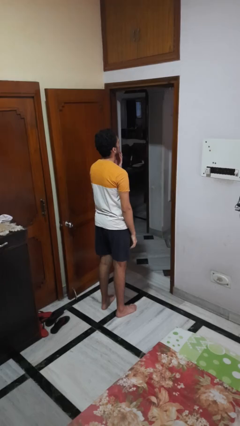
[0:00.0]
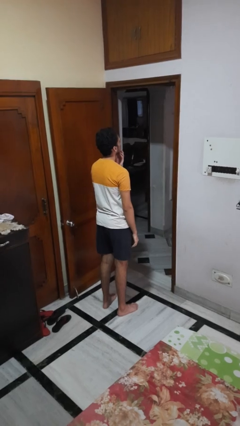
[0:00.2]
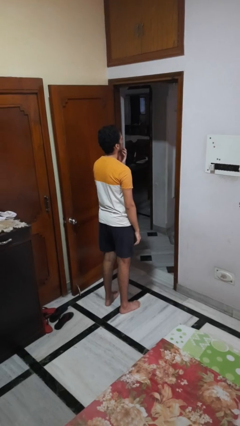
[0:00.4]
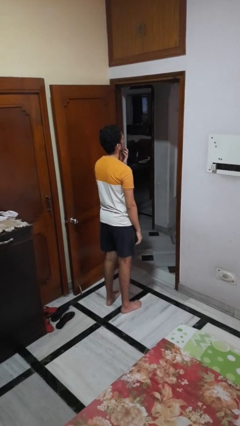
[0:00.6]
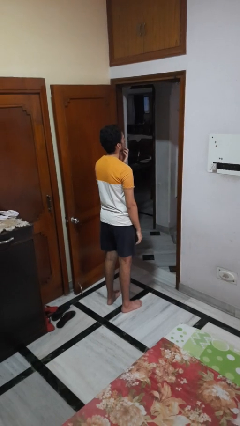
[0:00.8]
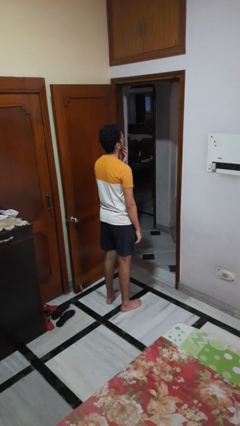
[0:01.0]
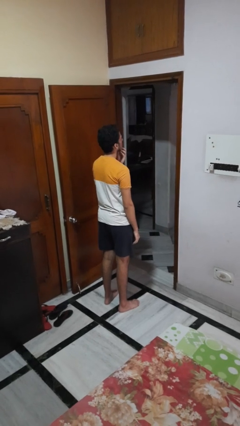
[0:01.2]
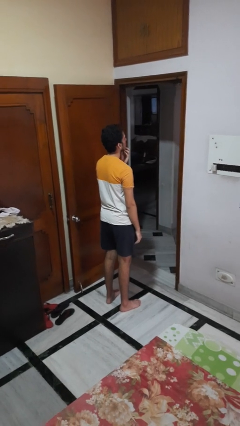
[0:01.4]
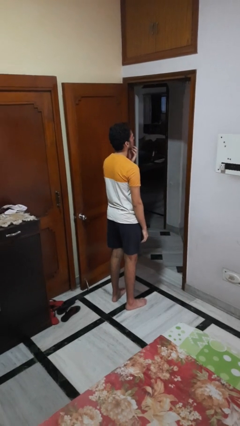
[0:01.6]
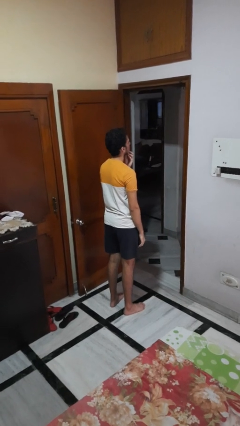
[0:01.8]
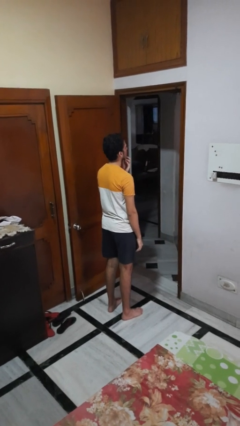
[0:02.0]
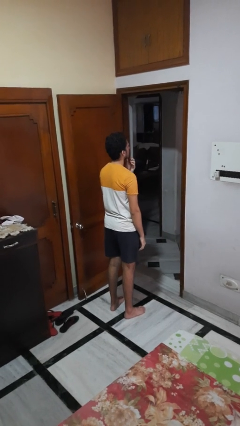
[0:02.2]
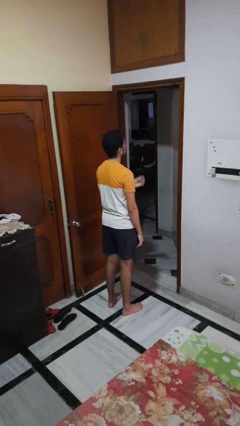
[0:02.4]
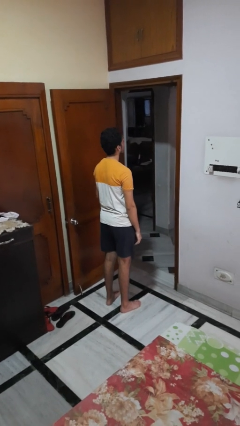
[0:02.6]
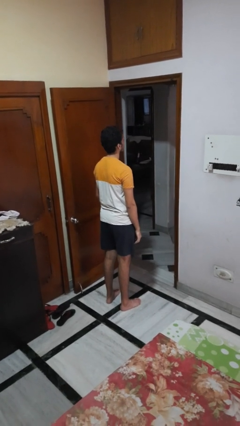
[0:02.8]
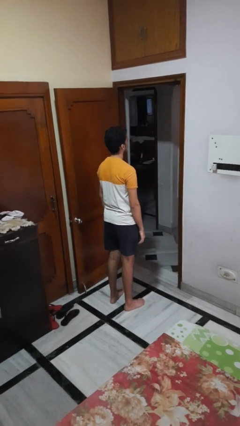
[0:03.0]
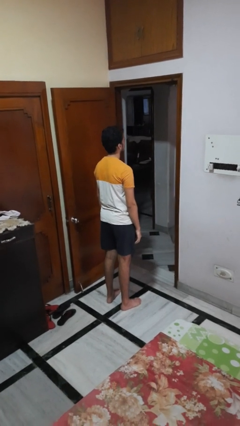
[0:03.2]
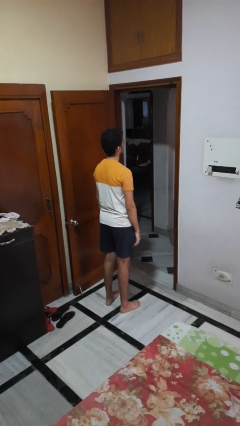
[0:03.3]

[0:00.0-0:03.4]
person strokes chin

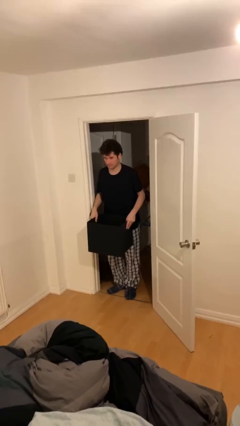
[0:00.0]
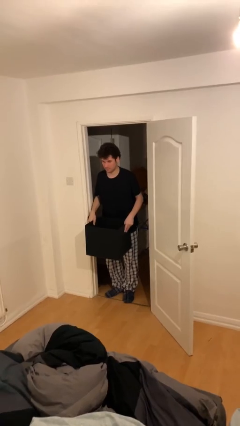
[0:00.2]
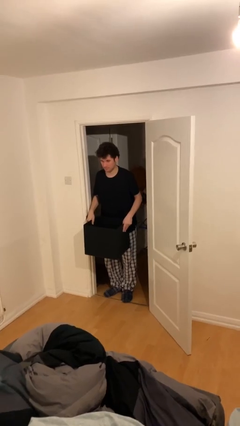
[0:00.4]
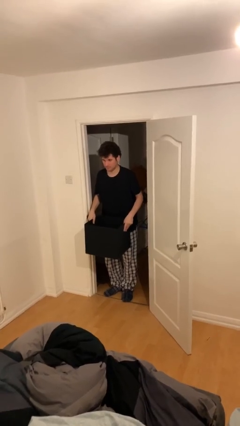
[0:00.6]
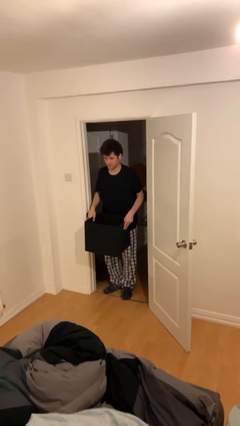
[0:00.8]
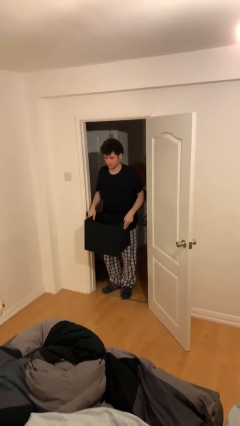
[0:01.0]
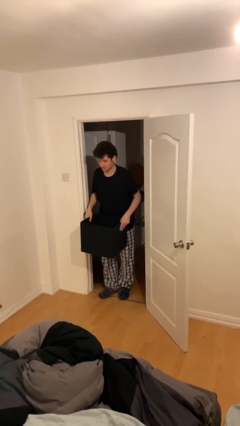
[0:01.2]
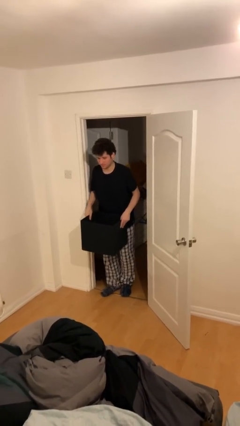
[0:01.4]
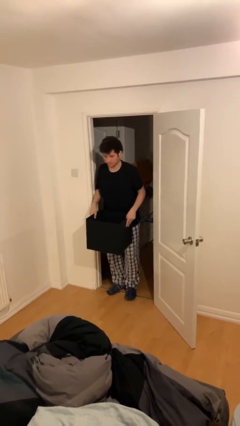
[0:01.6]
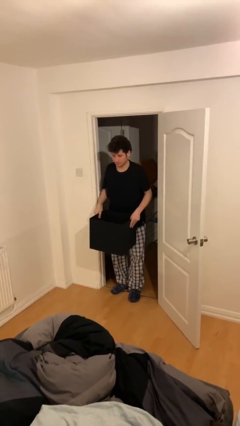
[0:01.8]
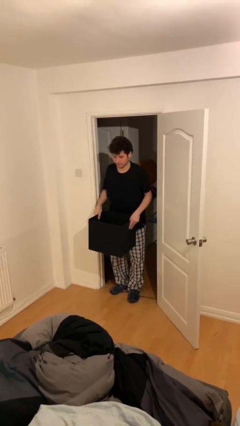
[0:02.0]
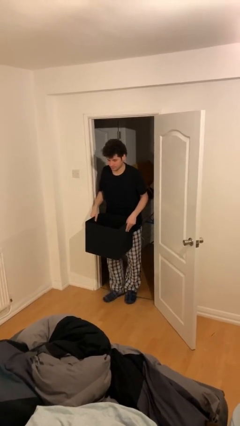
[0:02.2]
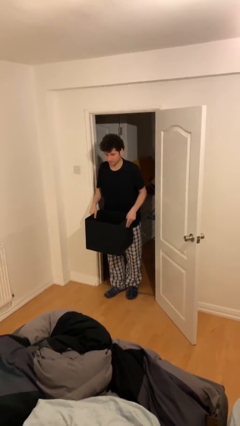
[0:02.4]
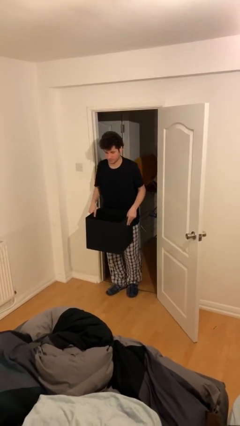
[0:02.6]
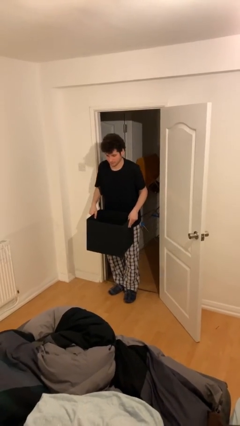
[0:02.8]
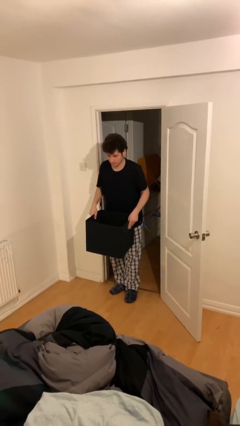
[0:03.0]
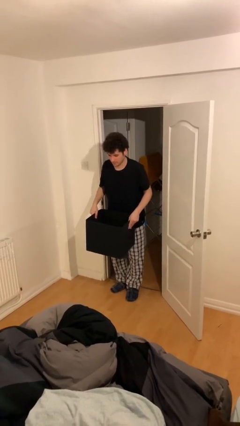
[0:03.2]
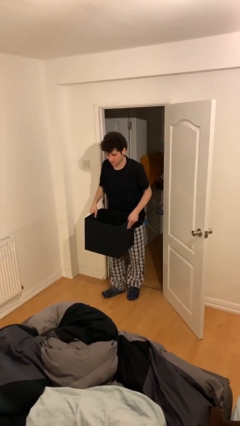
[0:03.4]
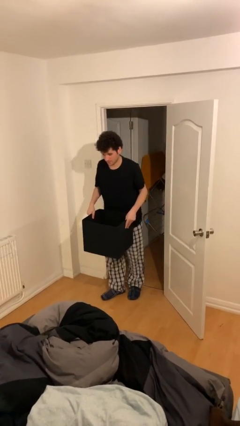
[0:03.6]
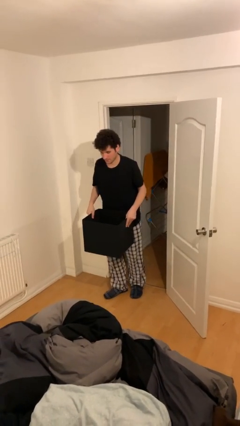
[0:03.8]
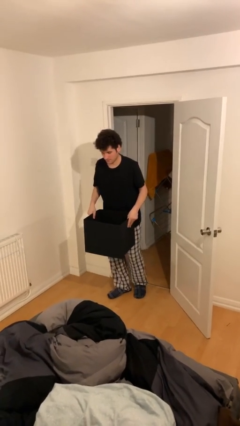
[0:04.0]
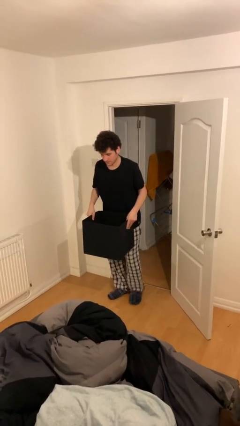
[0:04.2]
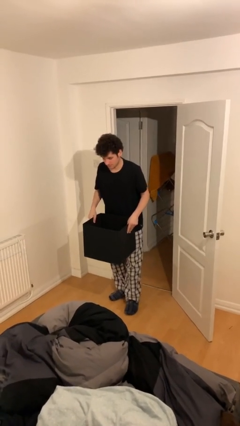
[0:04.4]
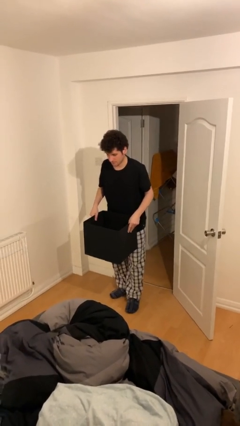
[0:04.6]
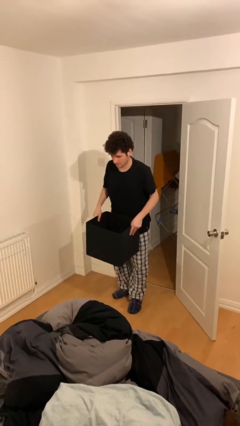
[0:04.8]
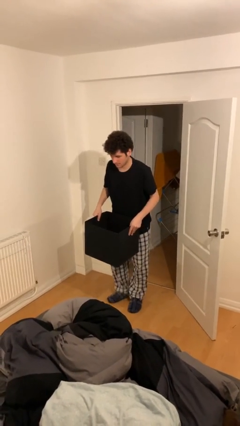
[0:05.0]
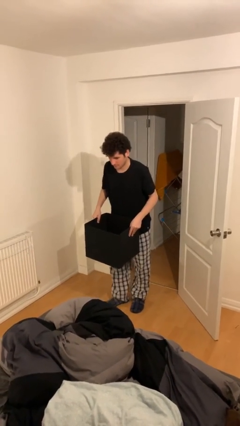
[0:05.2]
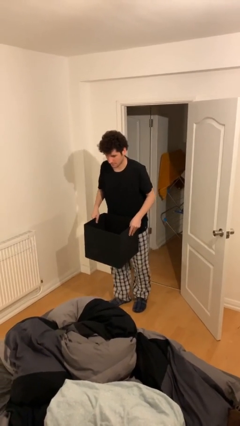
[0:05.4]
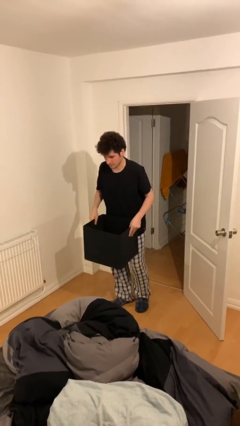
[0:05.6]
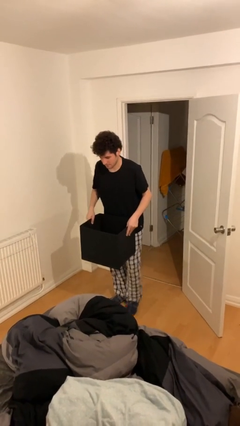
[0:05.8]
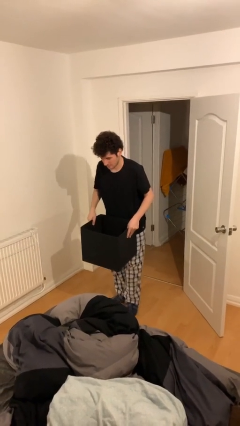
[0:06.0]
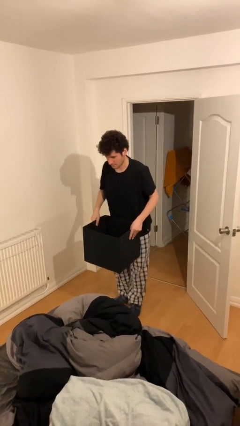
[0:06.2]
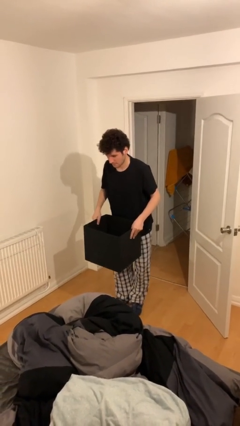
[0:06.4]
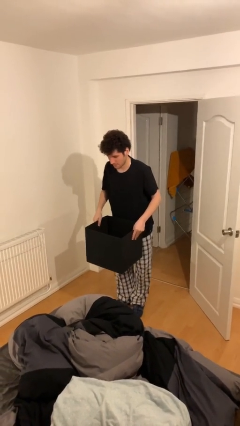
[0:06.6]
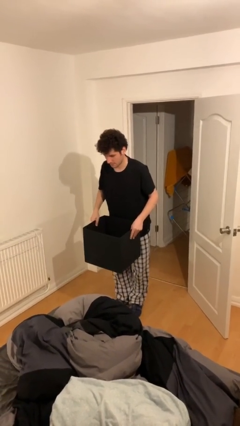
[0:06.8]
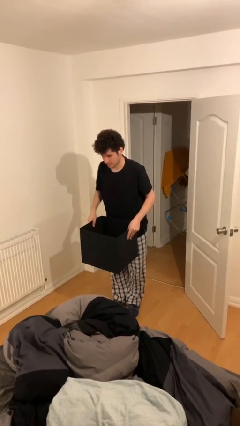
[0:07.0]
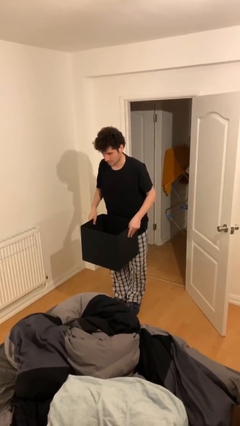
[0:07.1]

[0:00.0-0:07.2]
person carries heavy object

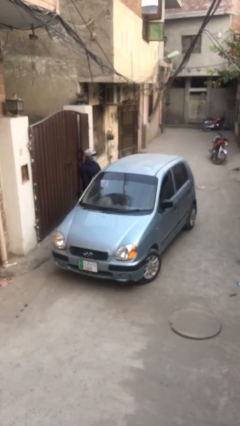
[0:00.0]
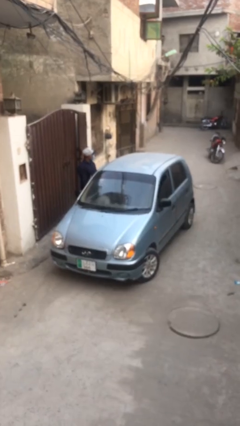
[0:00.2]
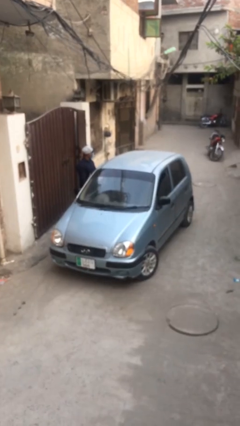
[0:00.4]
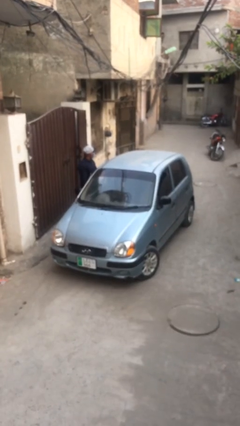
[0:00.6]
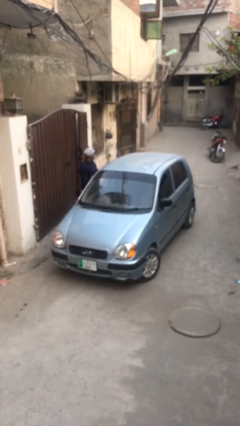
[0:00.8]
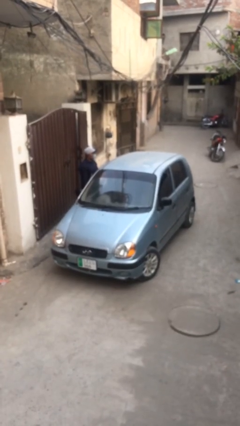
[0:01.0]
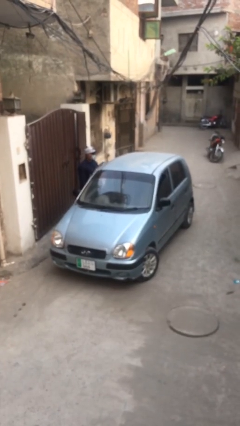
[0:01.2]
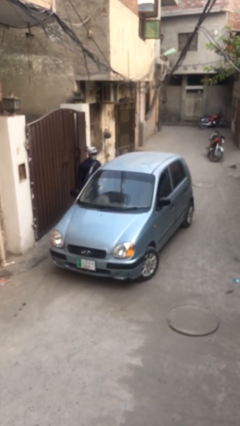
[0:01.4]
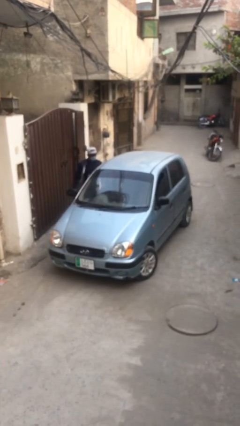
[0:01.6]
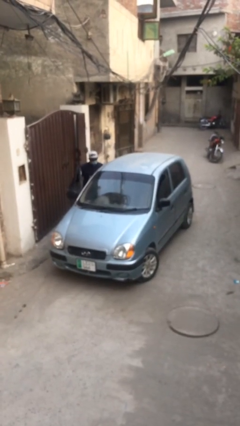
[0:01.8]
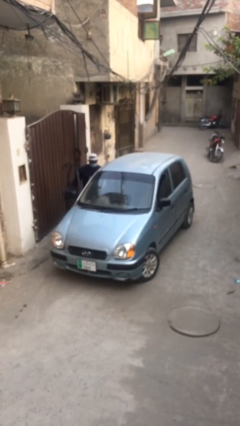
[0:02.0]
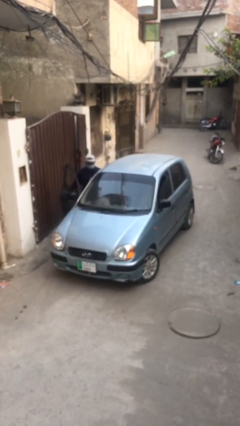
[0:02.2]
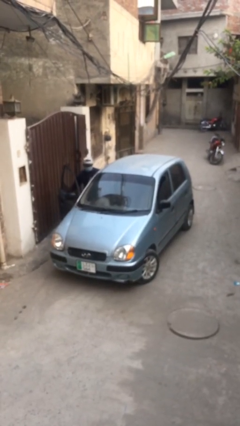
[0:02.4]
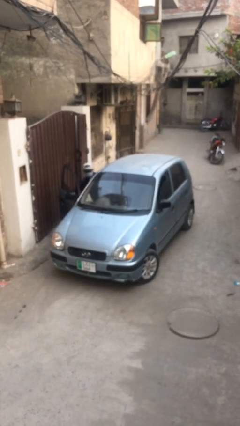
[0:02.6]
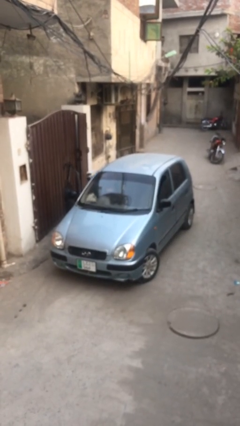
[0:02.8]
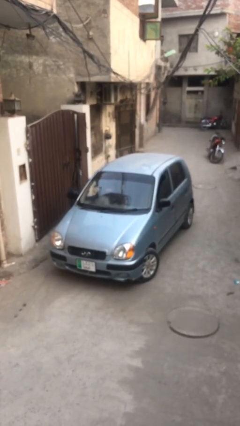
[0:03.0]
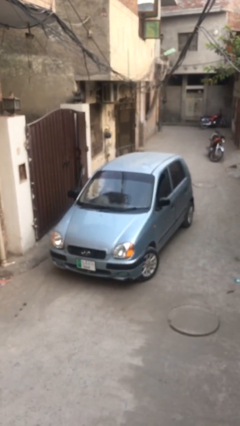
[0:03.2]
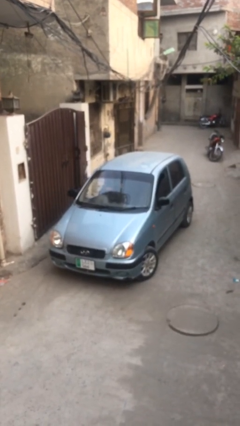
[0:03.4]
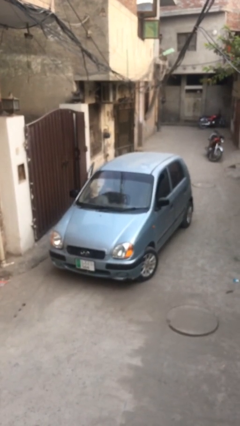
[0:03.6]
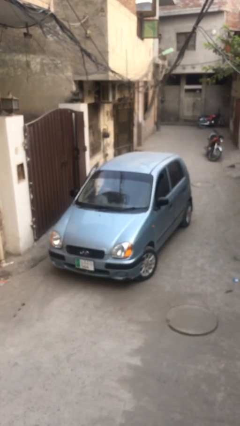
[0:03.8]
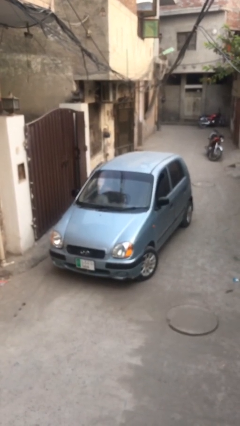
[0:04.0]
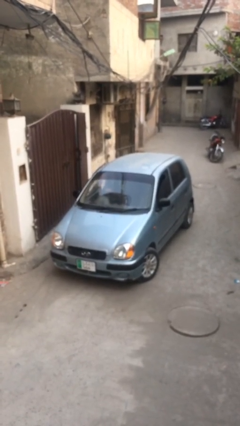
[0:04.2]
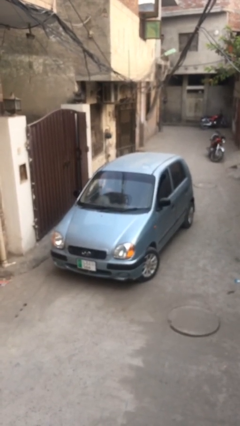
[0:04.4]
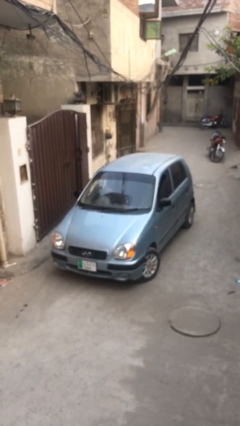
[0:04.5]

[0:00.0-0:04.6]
car picks up person

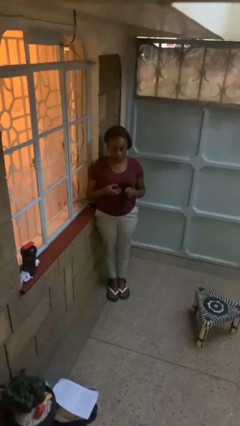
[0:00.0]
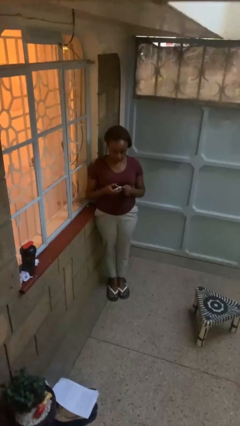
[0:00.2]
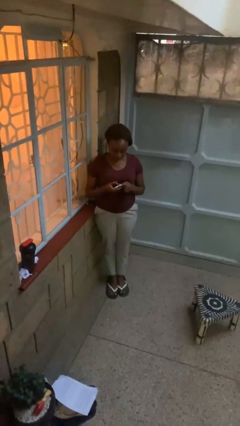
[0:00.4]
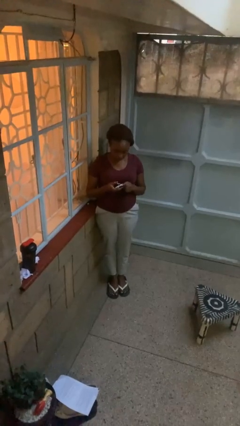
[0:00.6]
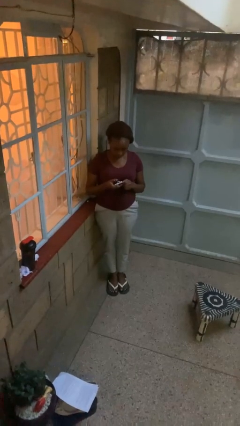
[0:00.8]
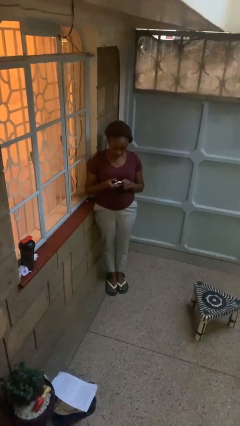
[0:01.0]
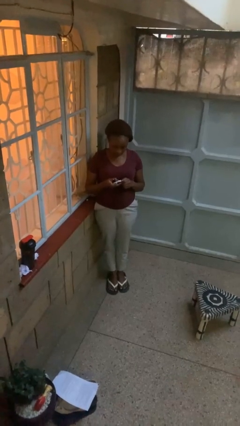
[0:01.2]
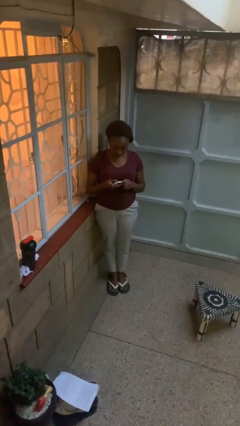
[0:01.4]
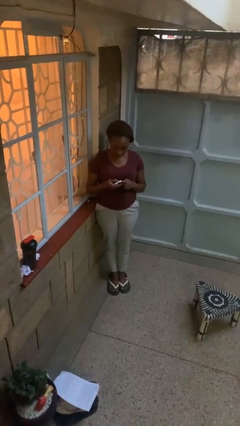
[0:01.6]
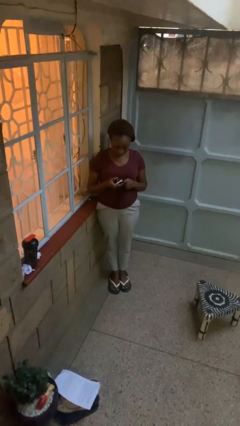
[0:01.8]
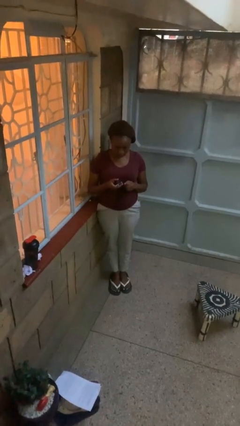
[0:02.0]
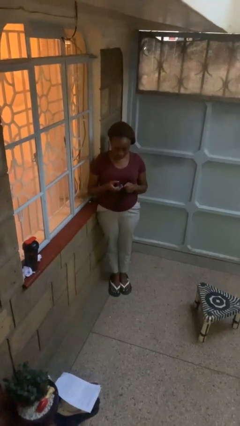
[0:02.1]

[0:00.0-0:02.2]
person clips fingernails

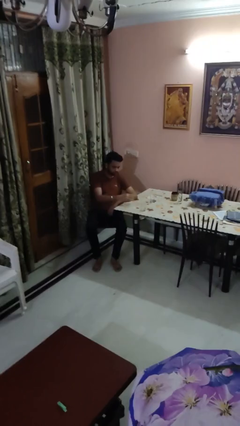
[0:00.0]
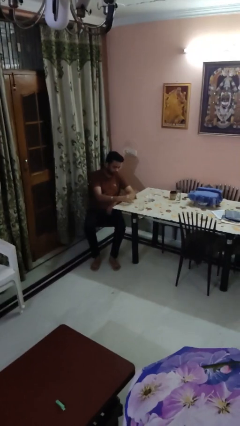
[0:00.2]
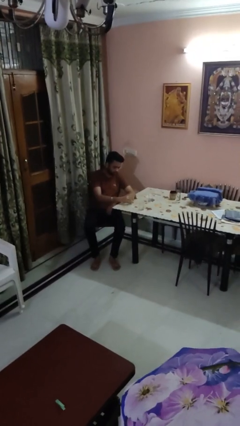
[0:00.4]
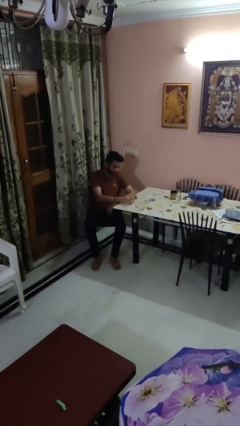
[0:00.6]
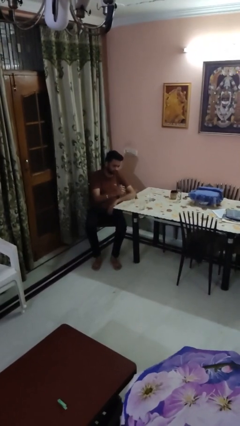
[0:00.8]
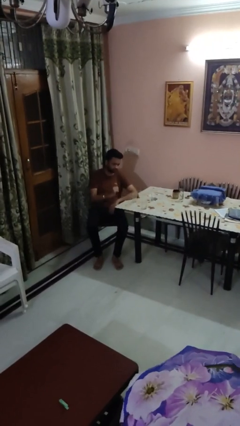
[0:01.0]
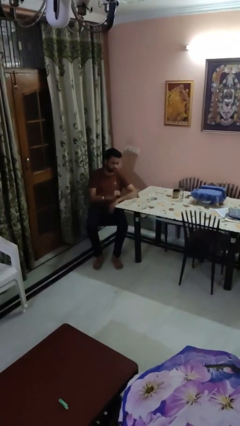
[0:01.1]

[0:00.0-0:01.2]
person puts down object on table
